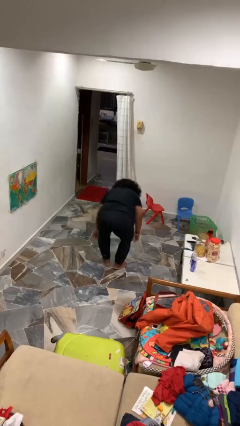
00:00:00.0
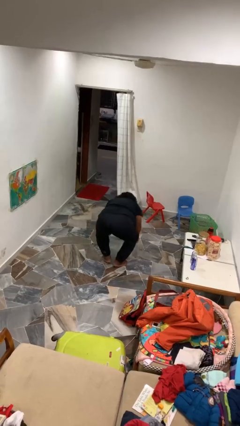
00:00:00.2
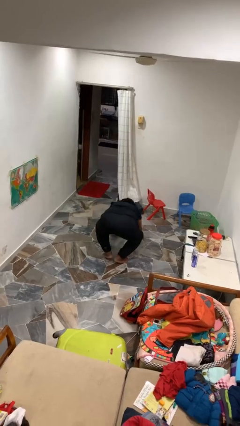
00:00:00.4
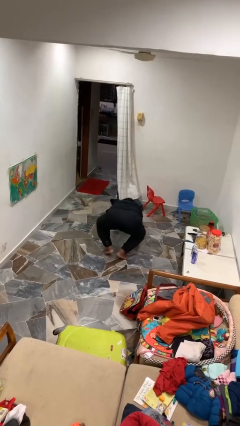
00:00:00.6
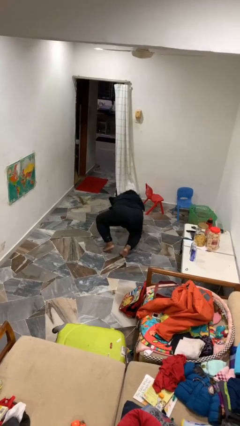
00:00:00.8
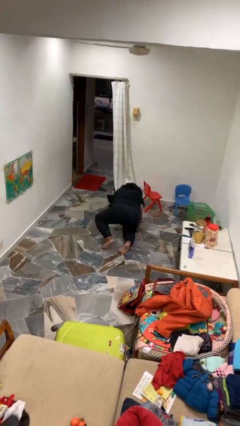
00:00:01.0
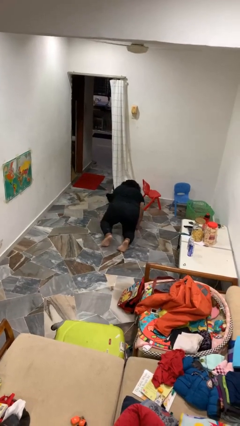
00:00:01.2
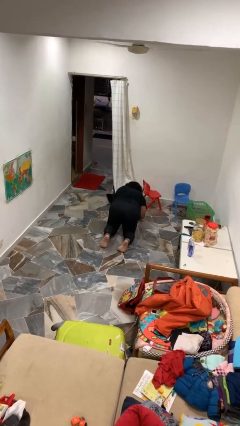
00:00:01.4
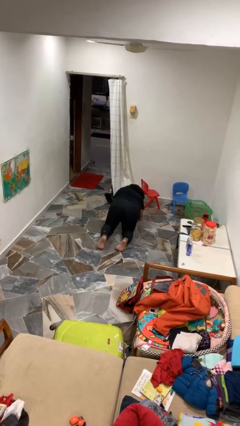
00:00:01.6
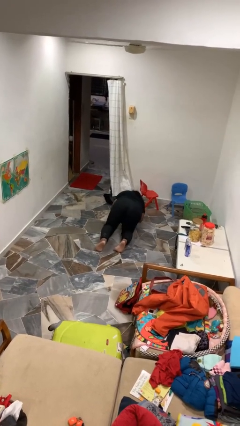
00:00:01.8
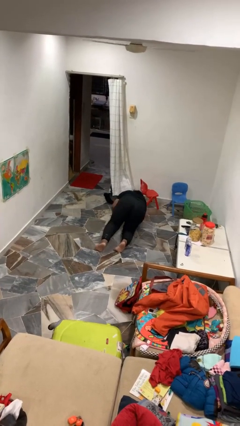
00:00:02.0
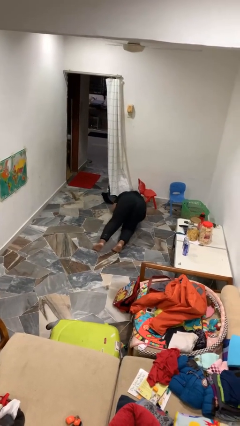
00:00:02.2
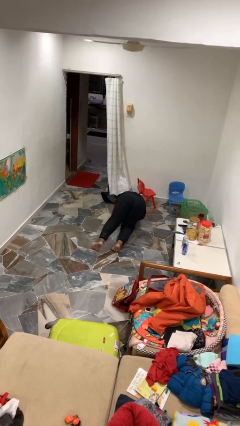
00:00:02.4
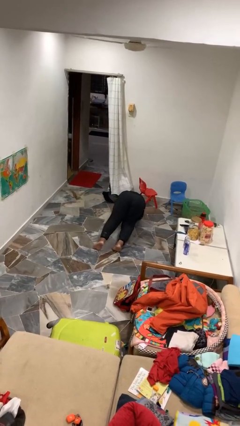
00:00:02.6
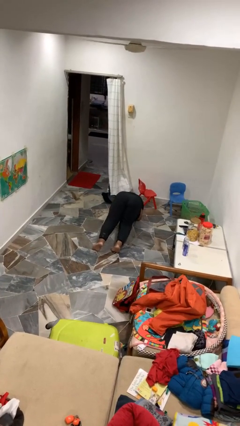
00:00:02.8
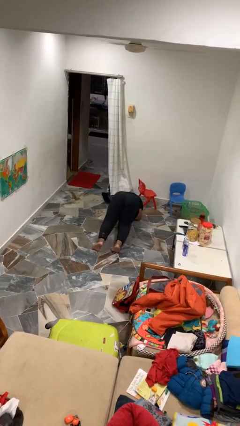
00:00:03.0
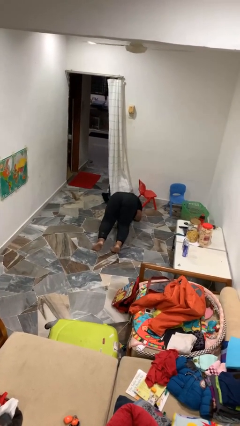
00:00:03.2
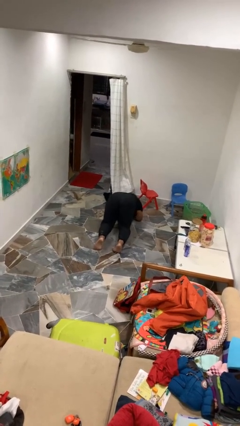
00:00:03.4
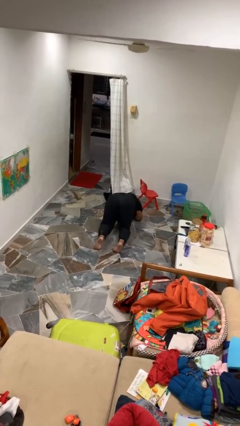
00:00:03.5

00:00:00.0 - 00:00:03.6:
person exercises with plank

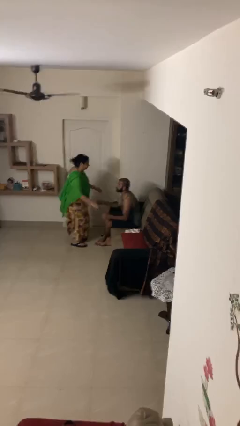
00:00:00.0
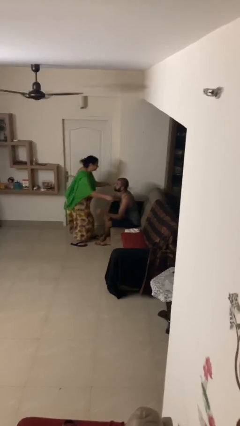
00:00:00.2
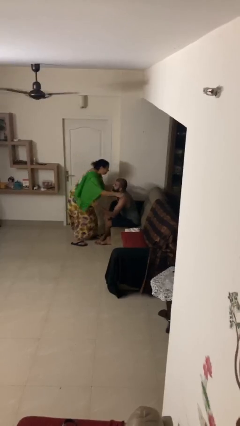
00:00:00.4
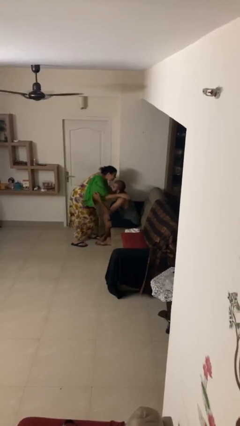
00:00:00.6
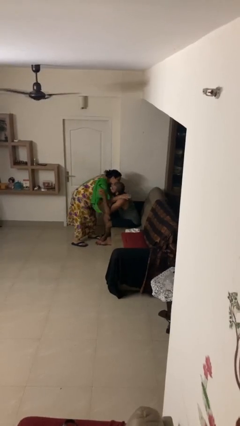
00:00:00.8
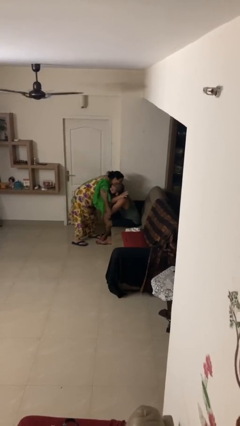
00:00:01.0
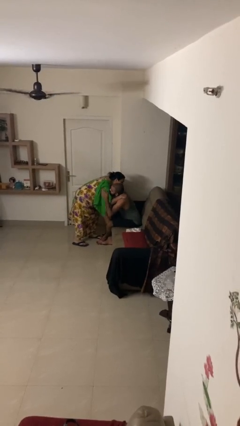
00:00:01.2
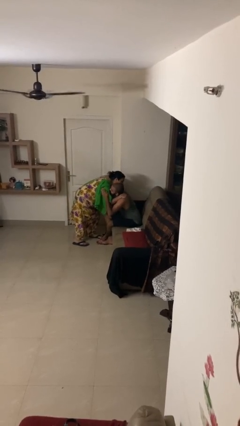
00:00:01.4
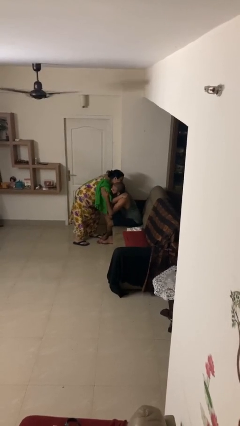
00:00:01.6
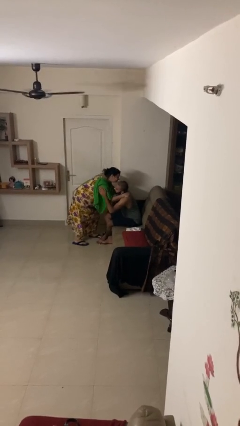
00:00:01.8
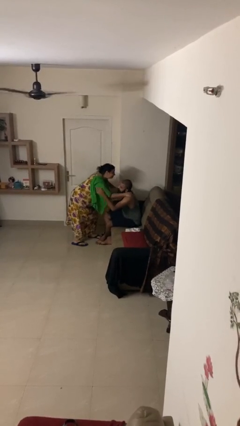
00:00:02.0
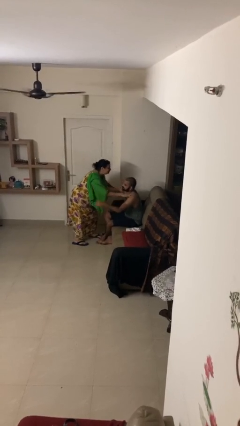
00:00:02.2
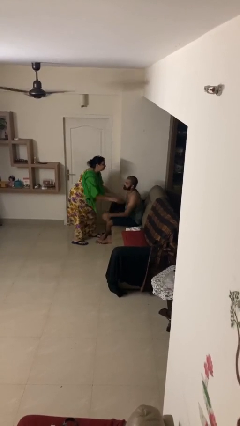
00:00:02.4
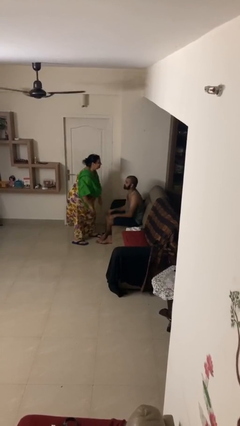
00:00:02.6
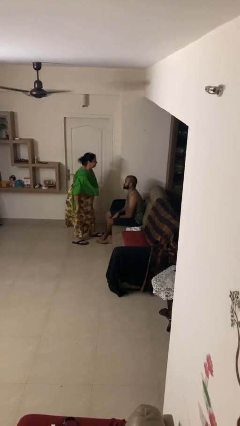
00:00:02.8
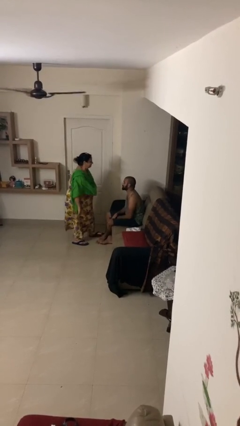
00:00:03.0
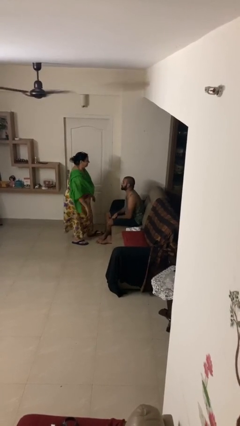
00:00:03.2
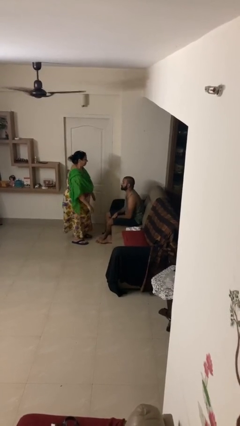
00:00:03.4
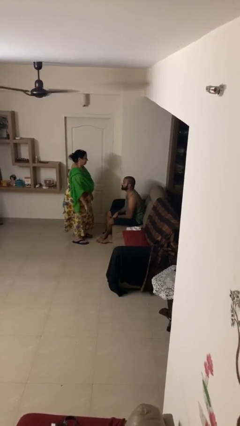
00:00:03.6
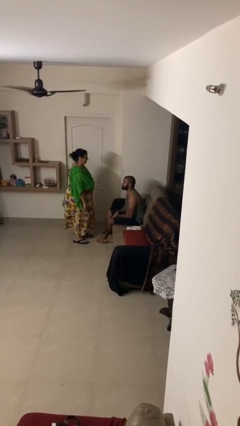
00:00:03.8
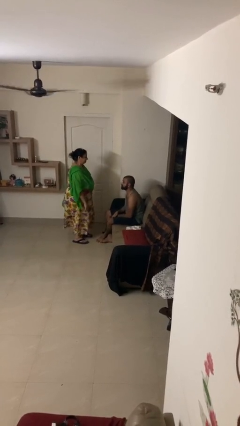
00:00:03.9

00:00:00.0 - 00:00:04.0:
person embraces person

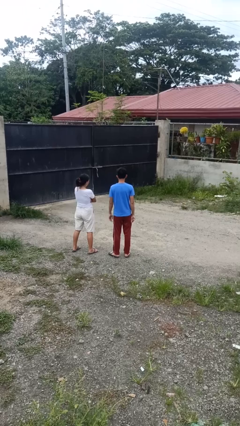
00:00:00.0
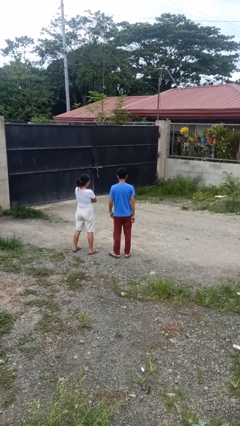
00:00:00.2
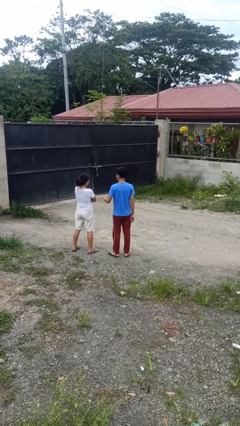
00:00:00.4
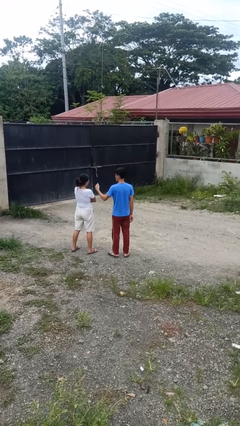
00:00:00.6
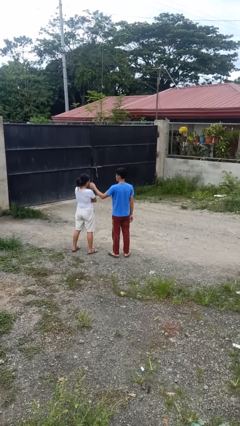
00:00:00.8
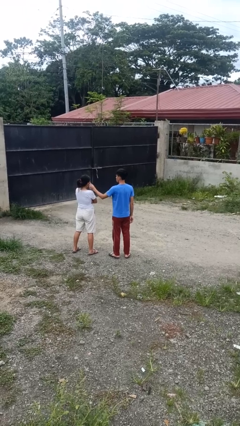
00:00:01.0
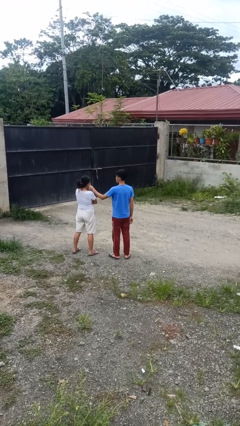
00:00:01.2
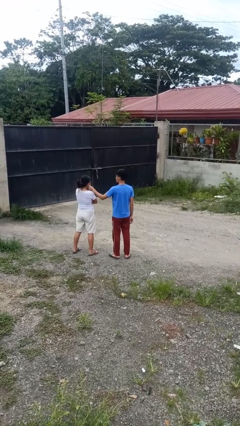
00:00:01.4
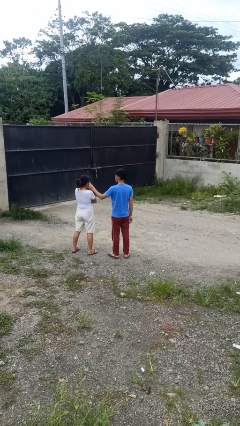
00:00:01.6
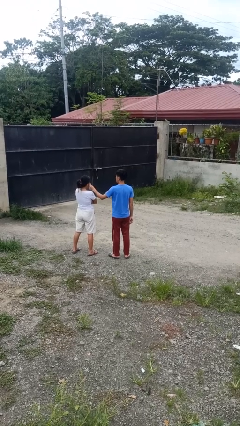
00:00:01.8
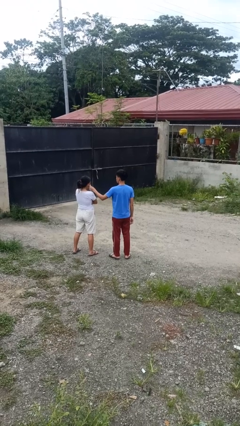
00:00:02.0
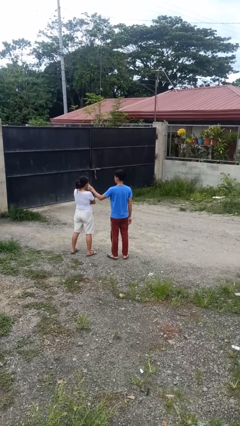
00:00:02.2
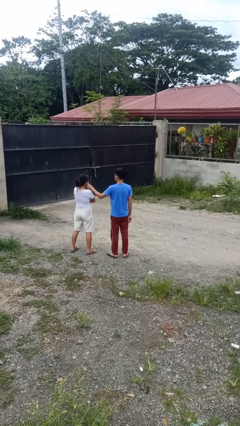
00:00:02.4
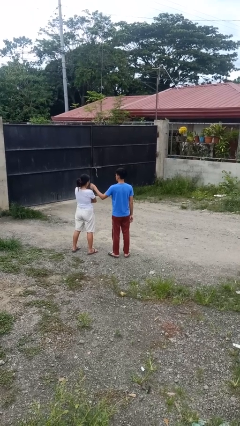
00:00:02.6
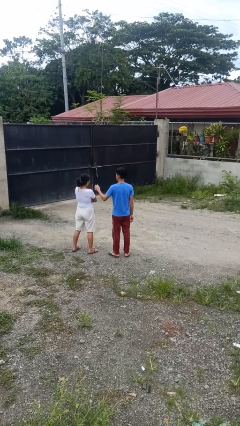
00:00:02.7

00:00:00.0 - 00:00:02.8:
person touches face of person

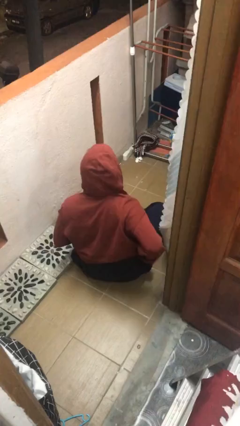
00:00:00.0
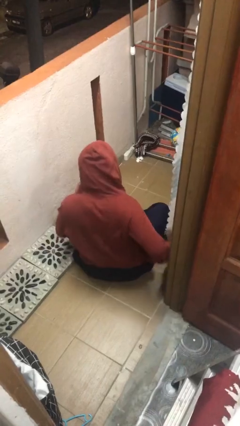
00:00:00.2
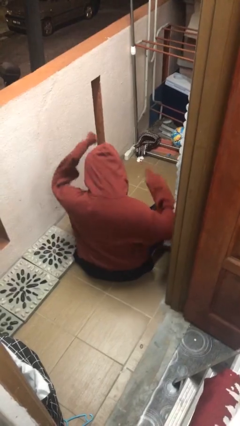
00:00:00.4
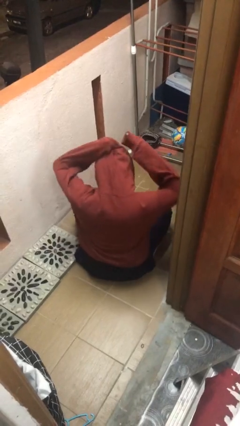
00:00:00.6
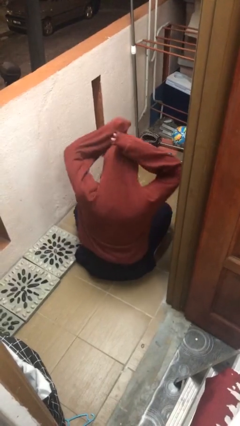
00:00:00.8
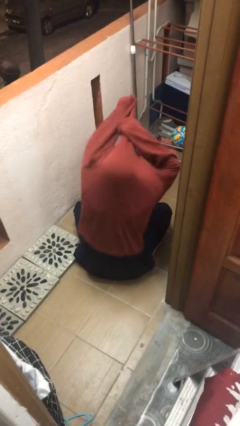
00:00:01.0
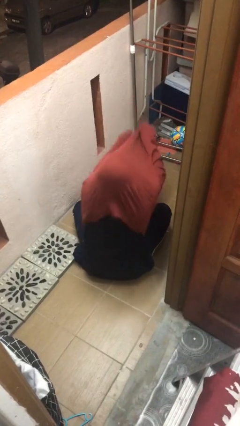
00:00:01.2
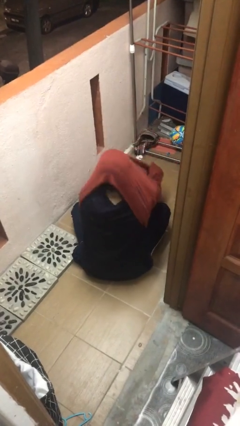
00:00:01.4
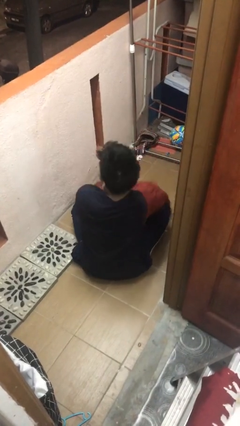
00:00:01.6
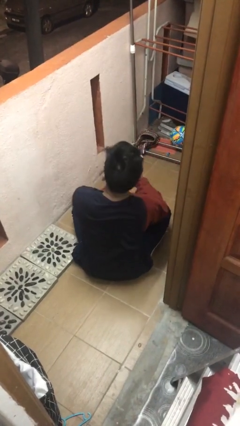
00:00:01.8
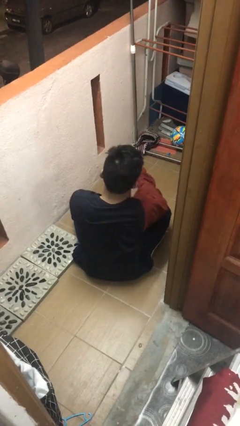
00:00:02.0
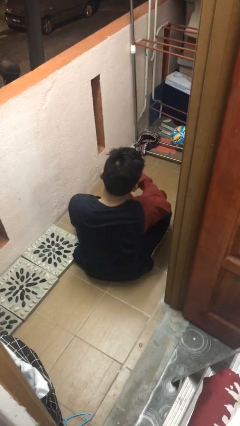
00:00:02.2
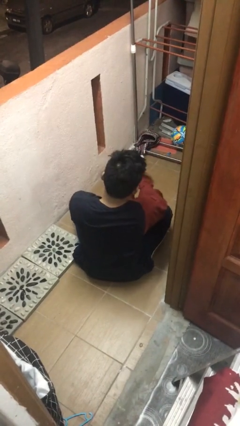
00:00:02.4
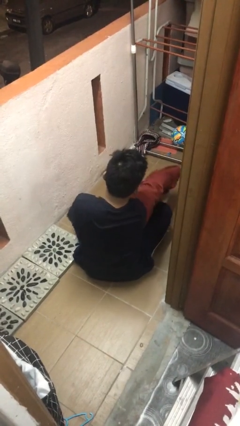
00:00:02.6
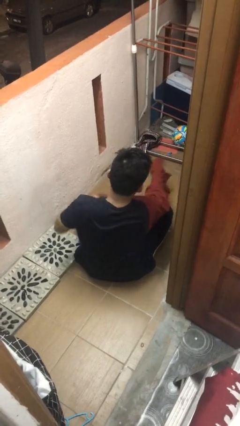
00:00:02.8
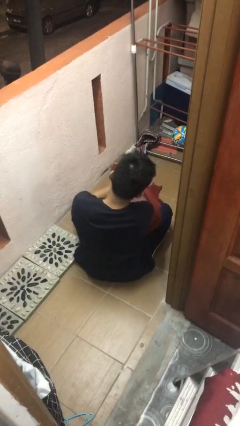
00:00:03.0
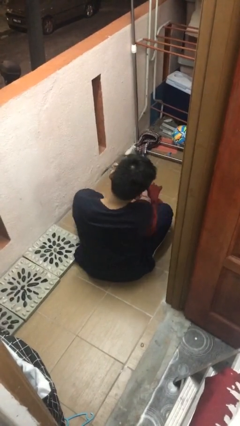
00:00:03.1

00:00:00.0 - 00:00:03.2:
person takes off hoodie

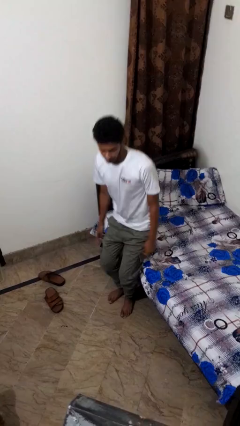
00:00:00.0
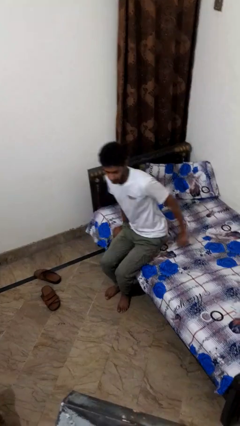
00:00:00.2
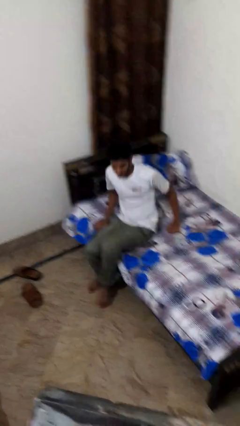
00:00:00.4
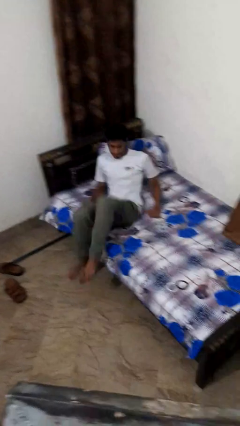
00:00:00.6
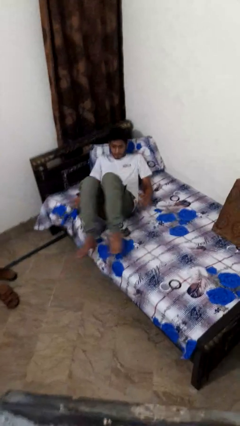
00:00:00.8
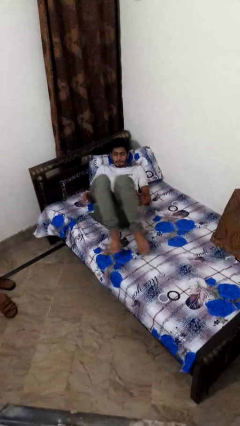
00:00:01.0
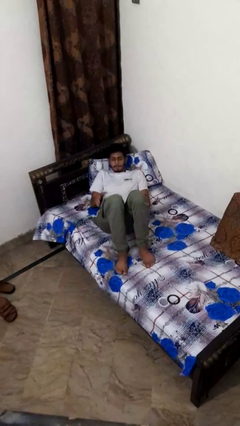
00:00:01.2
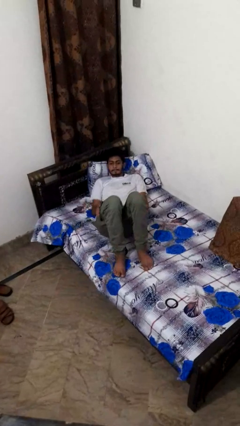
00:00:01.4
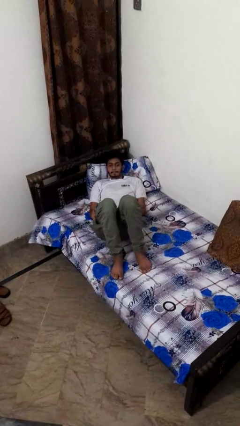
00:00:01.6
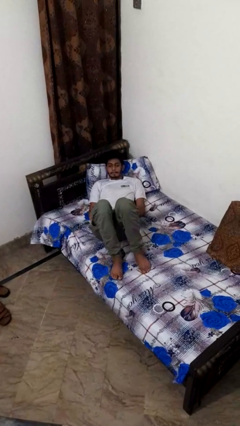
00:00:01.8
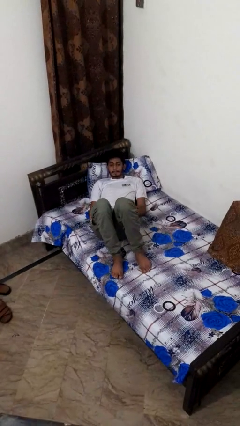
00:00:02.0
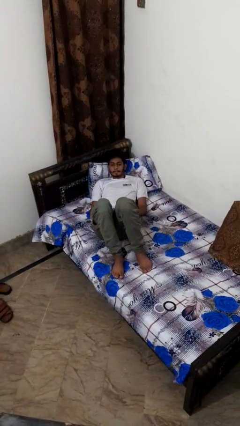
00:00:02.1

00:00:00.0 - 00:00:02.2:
person lies down on bed

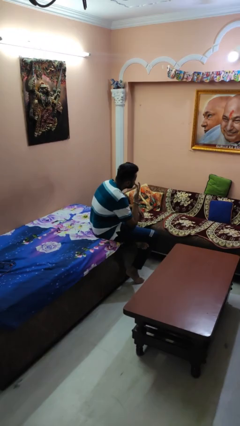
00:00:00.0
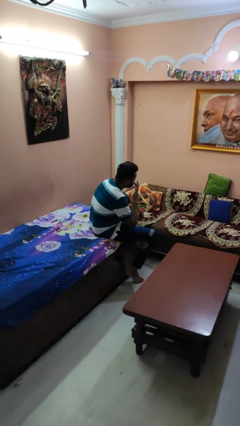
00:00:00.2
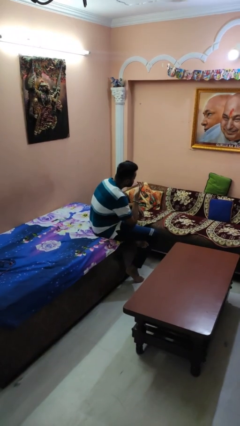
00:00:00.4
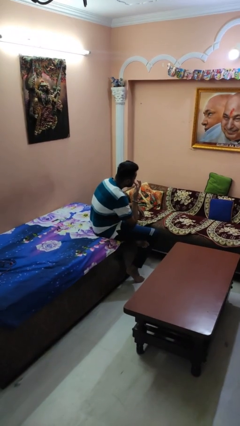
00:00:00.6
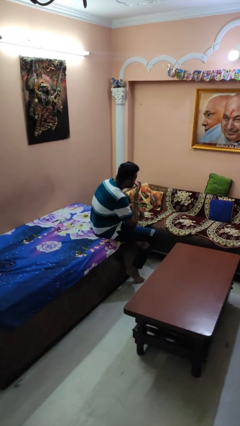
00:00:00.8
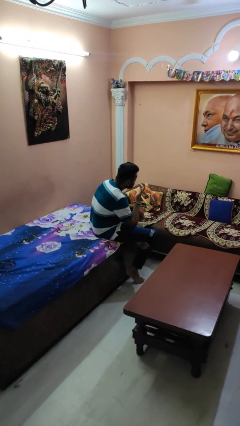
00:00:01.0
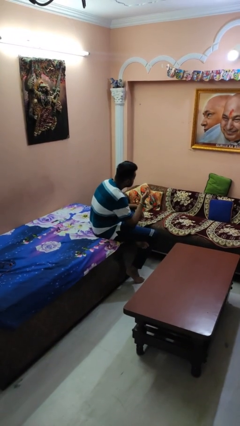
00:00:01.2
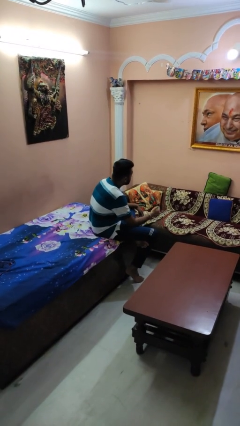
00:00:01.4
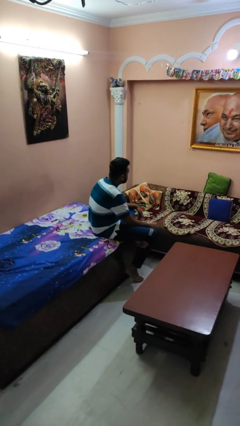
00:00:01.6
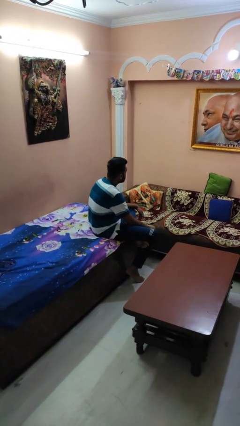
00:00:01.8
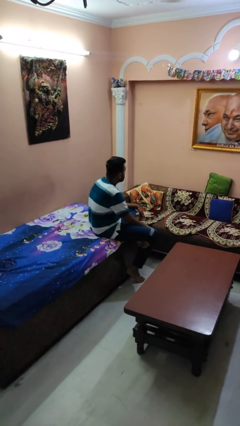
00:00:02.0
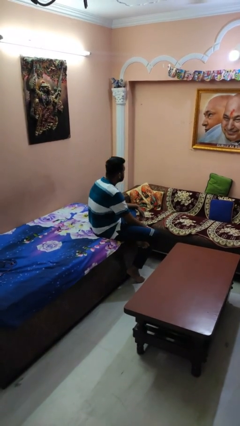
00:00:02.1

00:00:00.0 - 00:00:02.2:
person licks fingers
